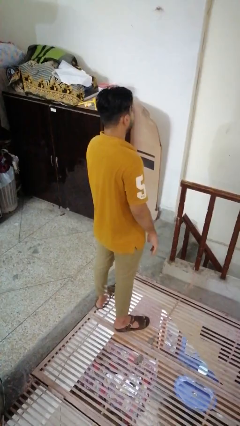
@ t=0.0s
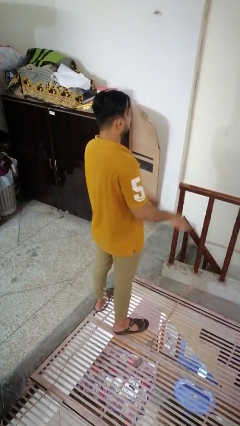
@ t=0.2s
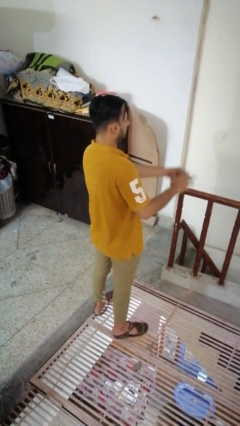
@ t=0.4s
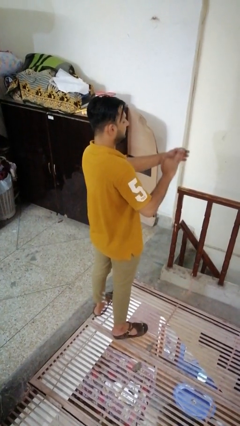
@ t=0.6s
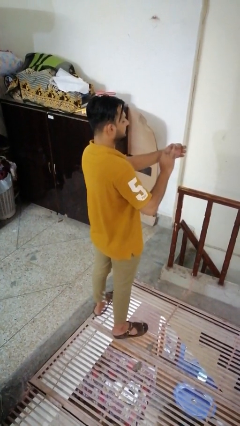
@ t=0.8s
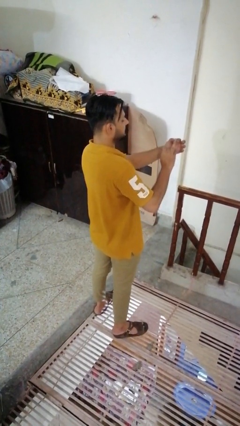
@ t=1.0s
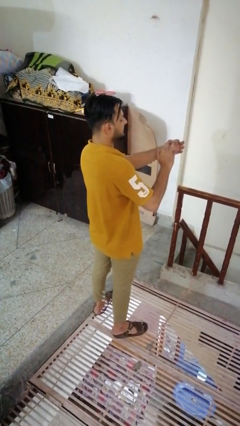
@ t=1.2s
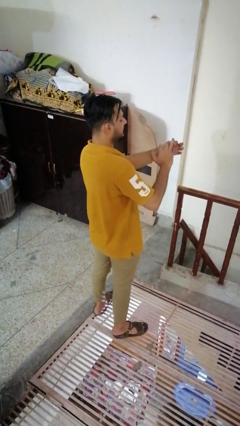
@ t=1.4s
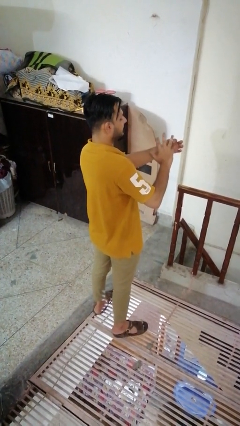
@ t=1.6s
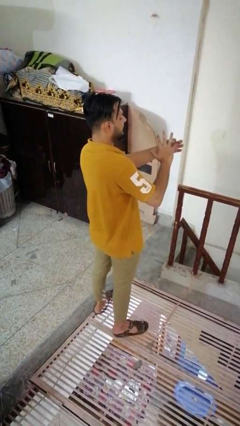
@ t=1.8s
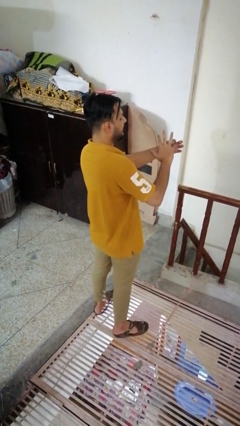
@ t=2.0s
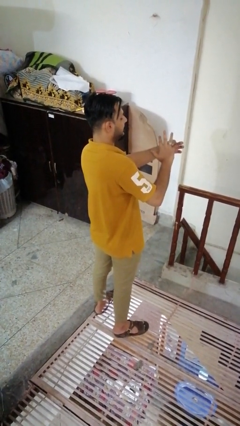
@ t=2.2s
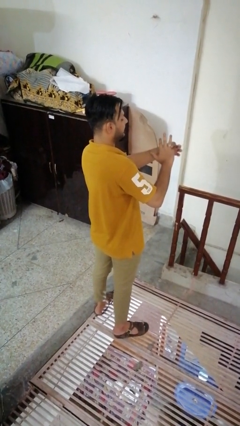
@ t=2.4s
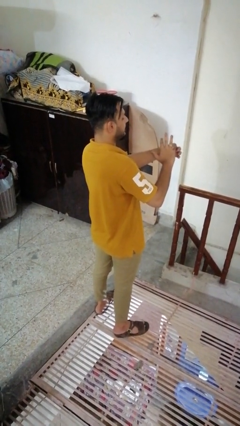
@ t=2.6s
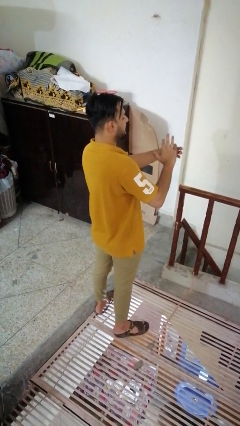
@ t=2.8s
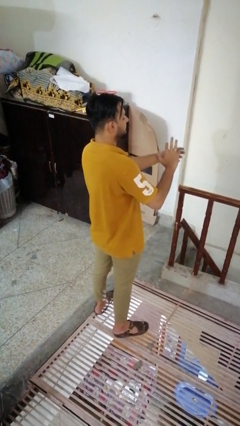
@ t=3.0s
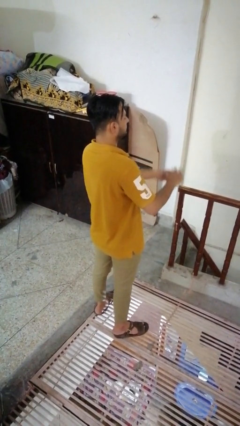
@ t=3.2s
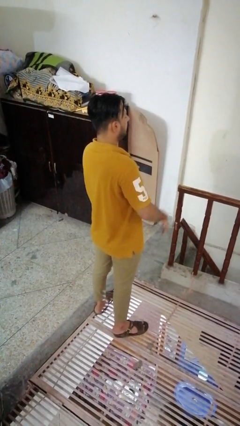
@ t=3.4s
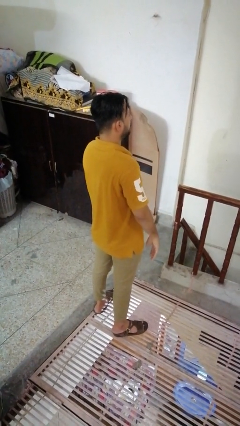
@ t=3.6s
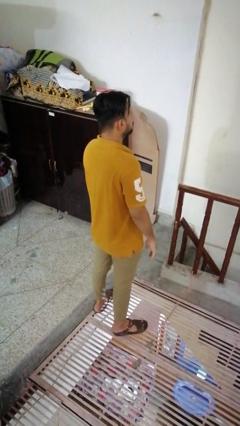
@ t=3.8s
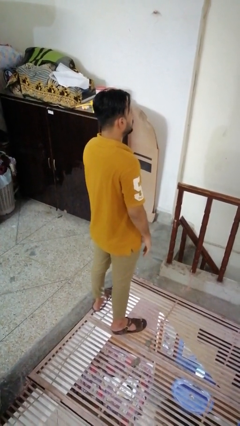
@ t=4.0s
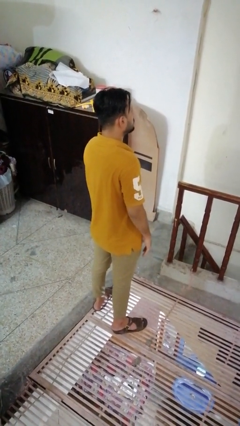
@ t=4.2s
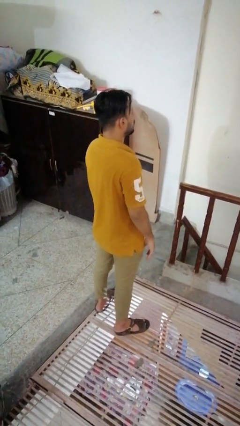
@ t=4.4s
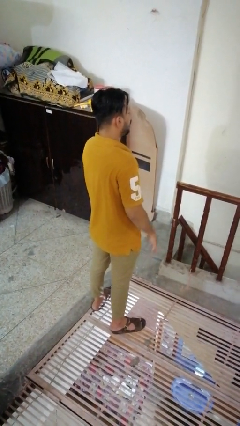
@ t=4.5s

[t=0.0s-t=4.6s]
person puts on ring

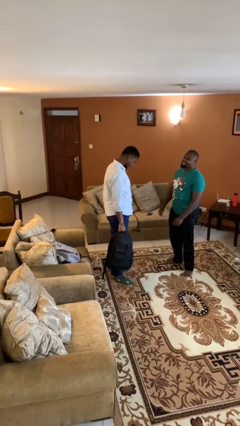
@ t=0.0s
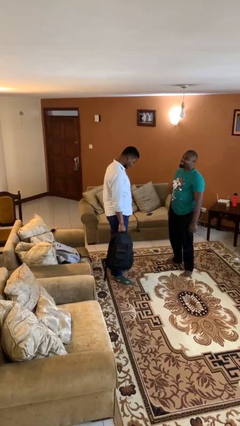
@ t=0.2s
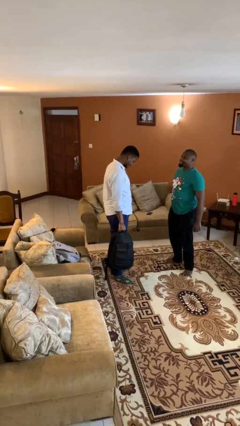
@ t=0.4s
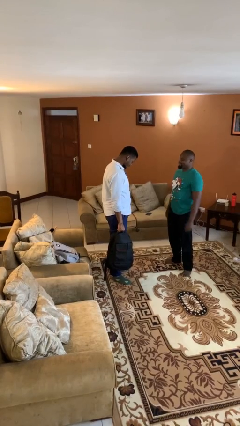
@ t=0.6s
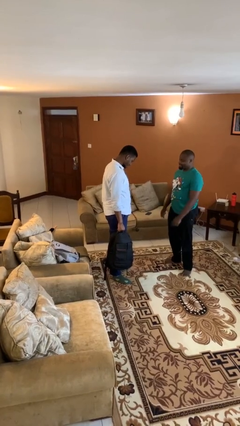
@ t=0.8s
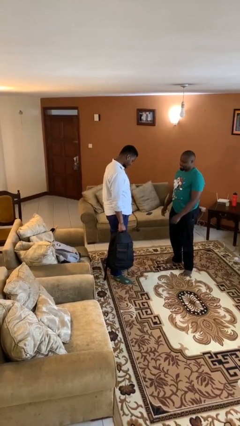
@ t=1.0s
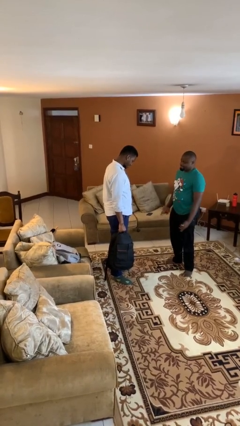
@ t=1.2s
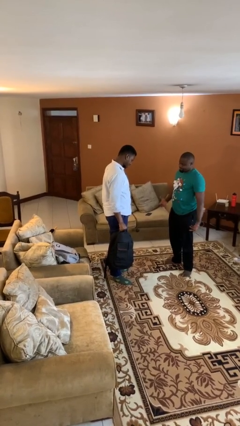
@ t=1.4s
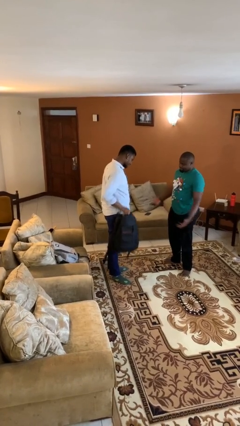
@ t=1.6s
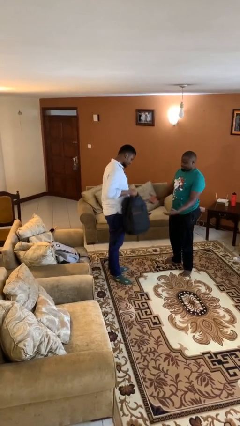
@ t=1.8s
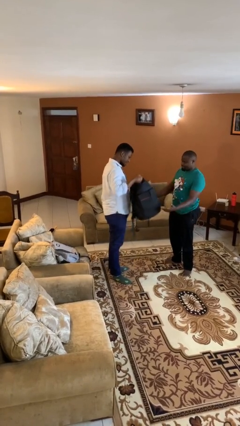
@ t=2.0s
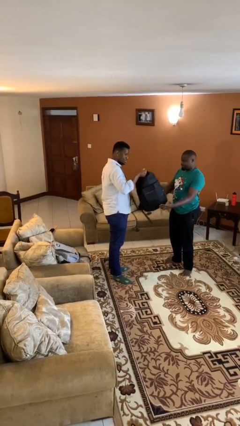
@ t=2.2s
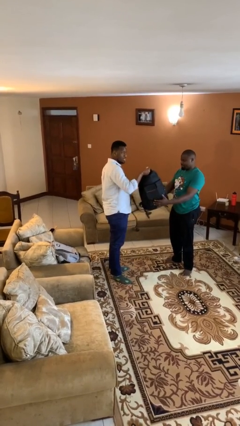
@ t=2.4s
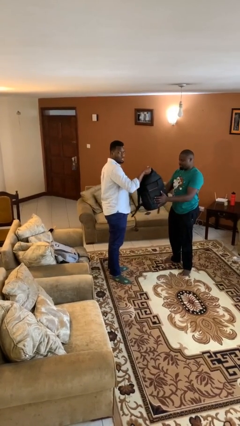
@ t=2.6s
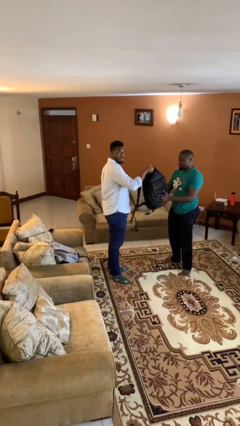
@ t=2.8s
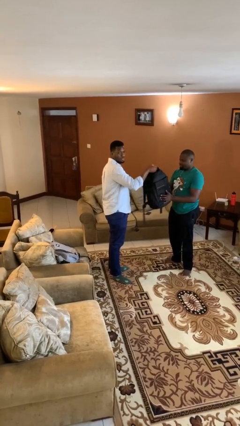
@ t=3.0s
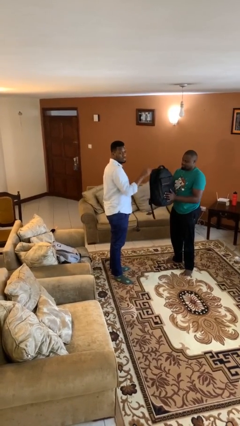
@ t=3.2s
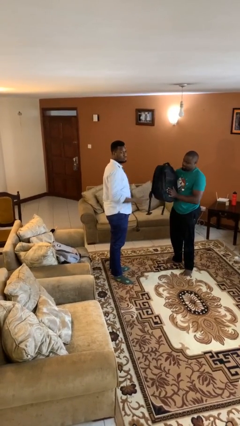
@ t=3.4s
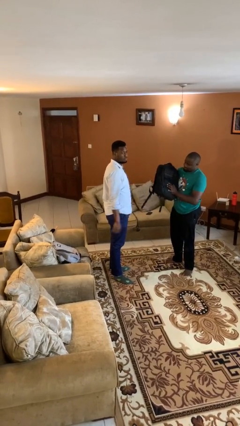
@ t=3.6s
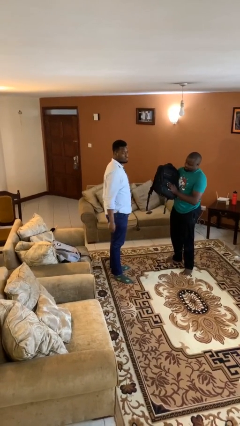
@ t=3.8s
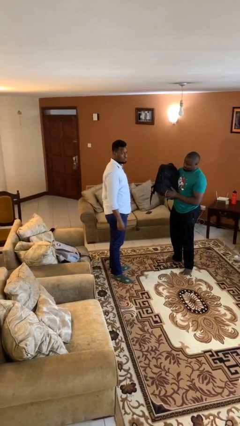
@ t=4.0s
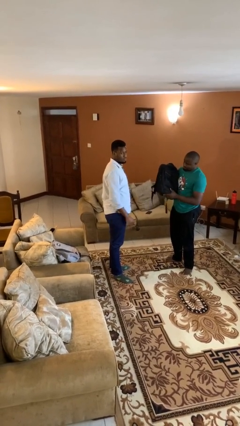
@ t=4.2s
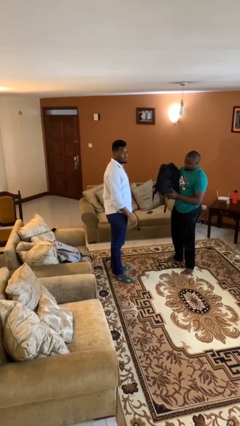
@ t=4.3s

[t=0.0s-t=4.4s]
person transfers object to person

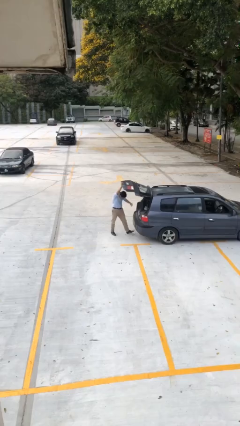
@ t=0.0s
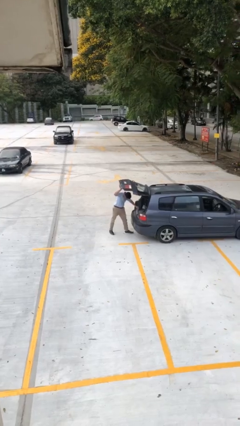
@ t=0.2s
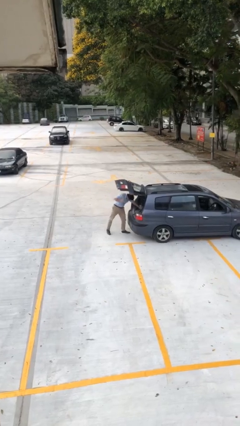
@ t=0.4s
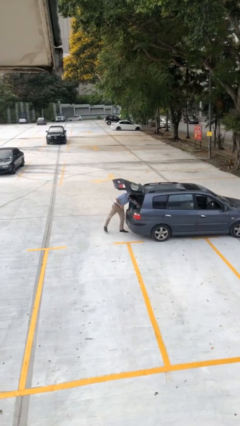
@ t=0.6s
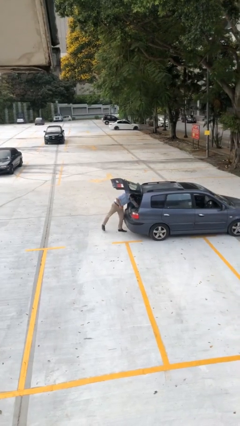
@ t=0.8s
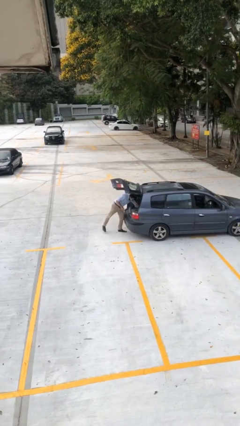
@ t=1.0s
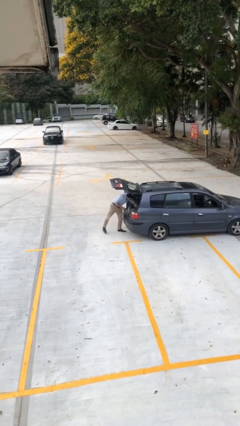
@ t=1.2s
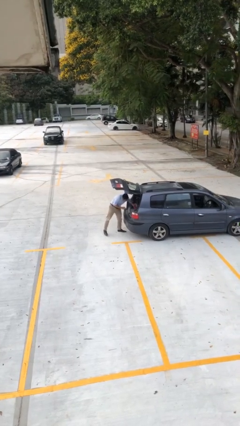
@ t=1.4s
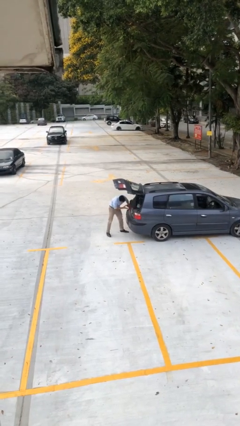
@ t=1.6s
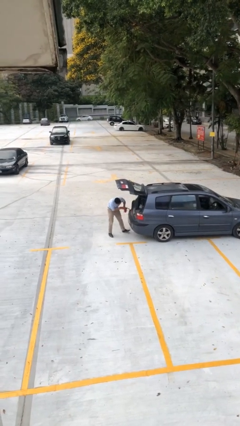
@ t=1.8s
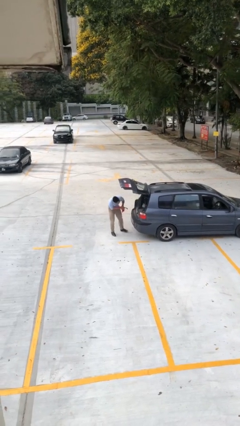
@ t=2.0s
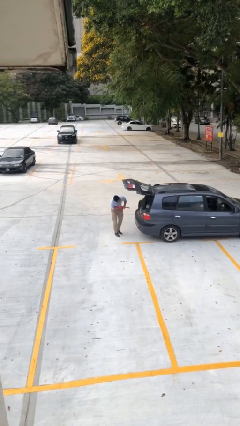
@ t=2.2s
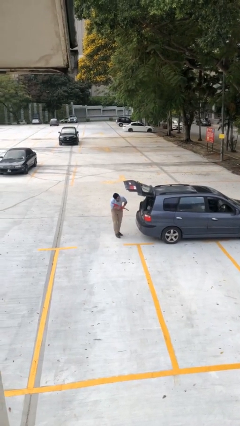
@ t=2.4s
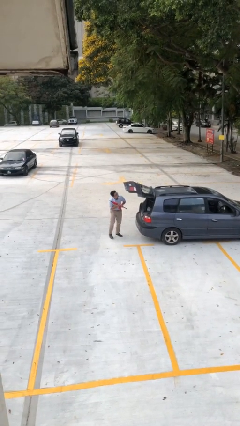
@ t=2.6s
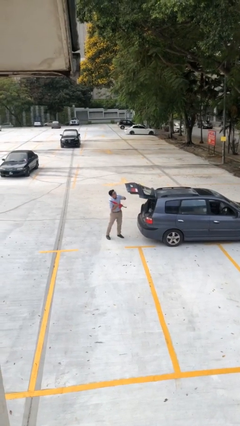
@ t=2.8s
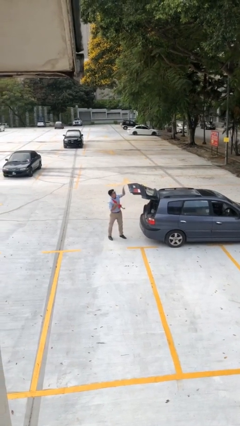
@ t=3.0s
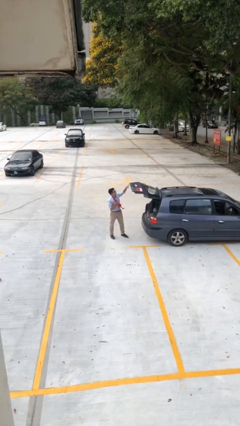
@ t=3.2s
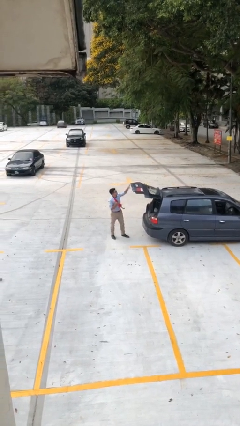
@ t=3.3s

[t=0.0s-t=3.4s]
person unloads car

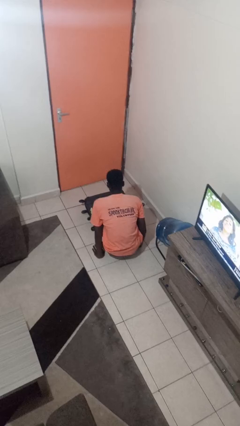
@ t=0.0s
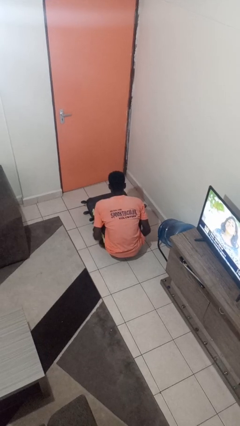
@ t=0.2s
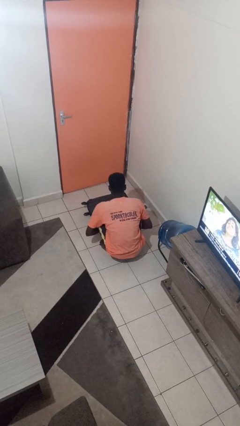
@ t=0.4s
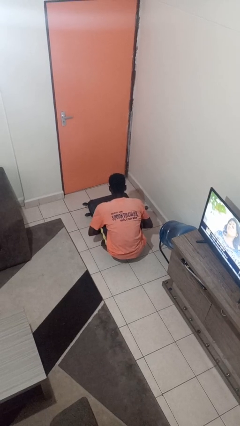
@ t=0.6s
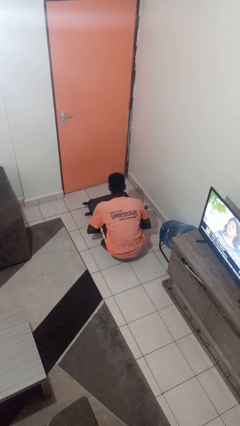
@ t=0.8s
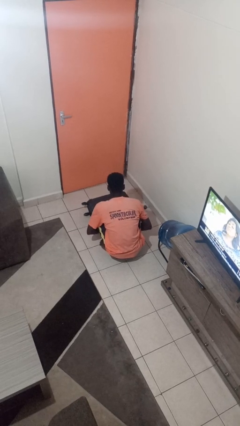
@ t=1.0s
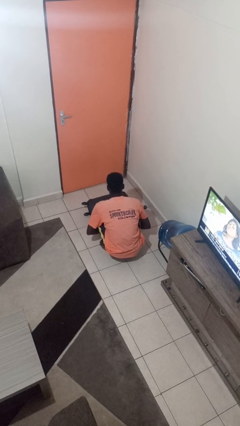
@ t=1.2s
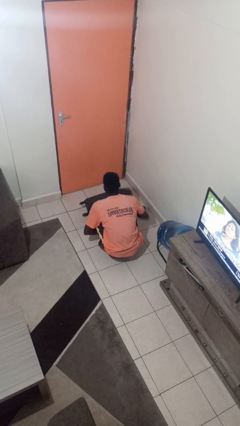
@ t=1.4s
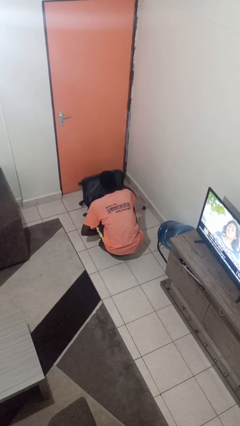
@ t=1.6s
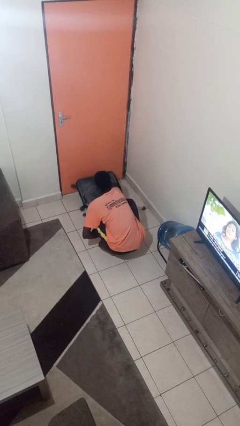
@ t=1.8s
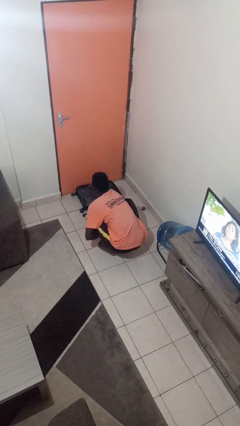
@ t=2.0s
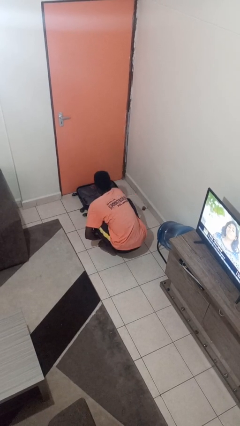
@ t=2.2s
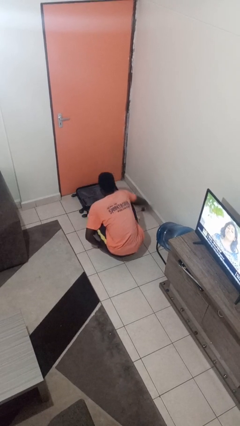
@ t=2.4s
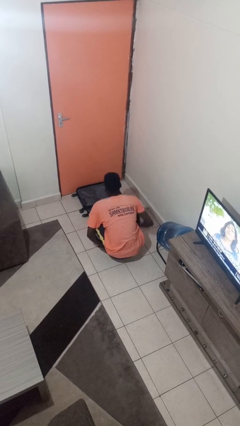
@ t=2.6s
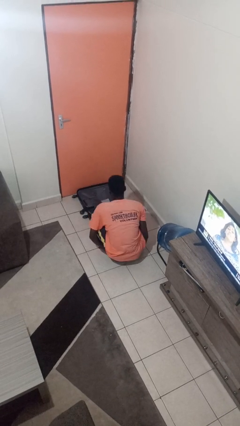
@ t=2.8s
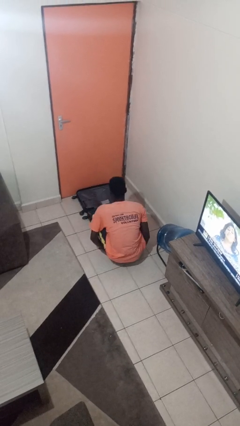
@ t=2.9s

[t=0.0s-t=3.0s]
person opens suitcase

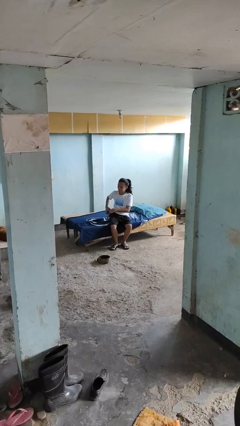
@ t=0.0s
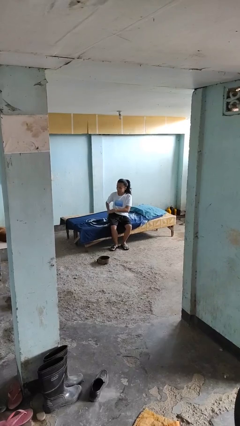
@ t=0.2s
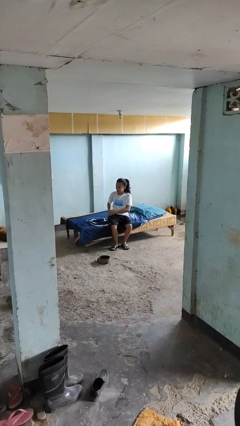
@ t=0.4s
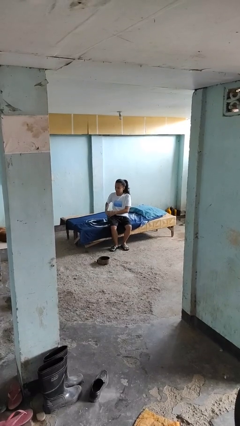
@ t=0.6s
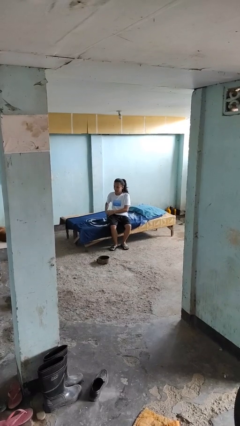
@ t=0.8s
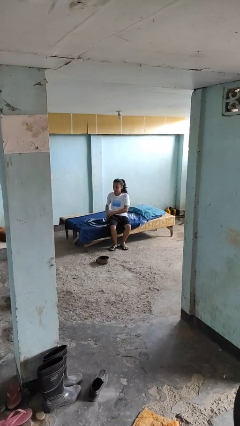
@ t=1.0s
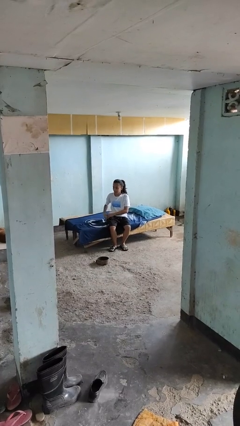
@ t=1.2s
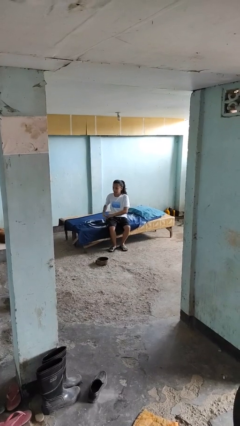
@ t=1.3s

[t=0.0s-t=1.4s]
person puts phone into pocket

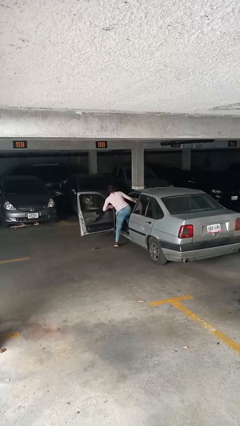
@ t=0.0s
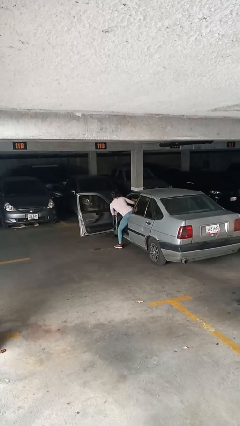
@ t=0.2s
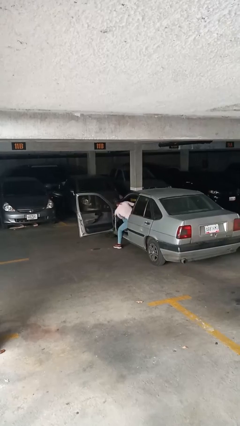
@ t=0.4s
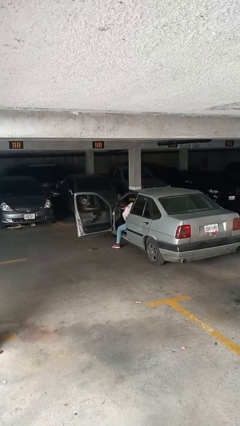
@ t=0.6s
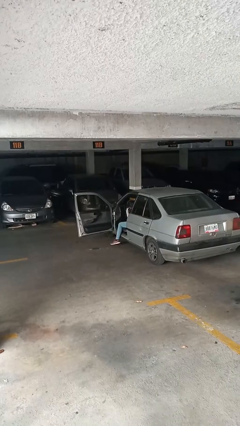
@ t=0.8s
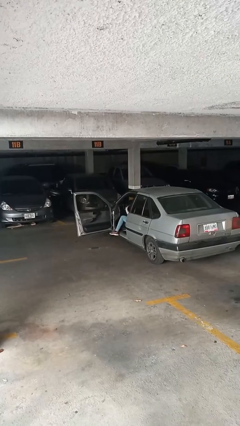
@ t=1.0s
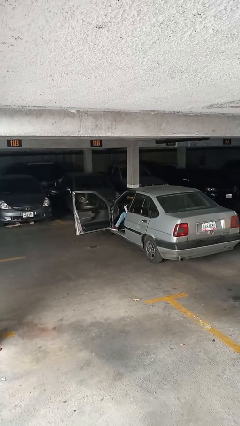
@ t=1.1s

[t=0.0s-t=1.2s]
person enters car
